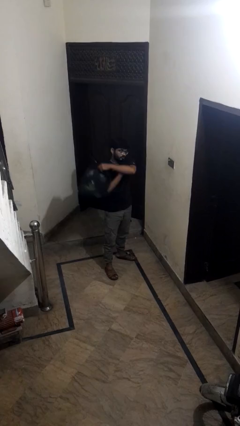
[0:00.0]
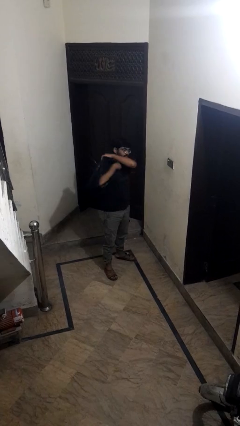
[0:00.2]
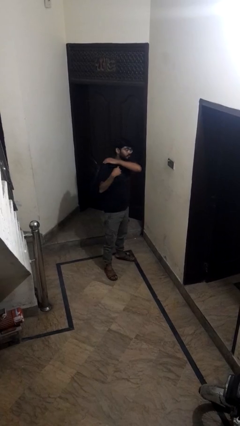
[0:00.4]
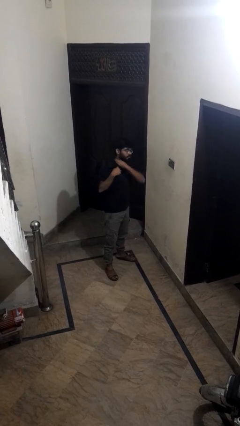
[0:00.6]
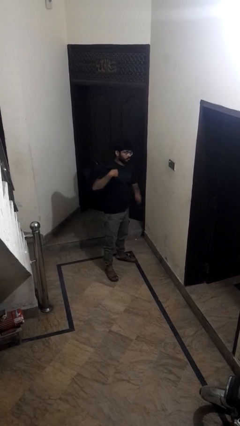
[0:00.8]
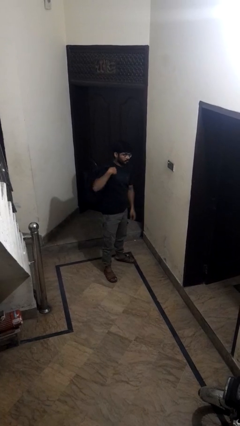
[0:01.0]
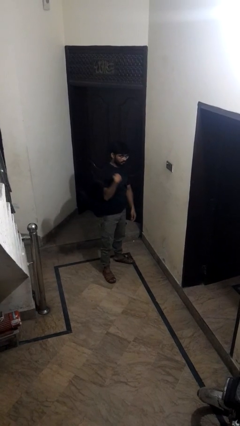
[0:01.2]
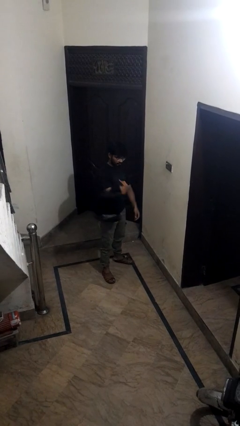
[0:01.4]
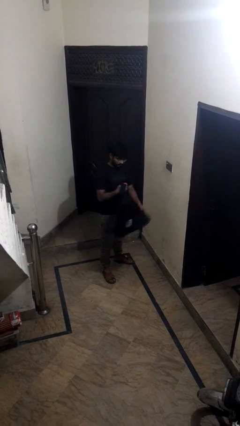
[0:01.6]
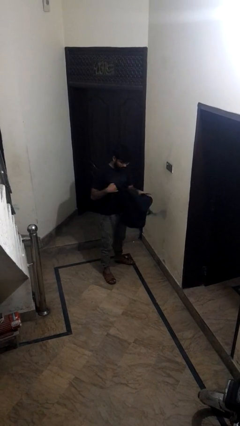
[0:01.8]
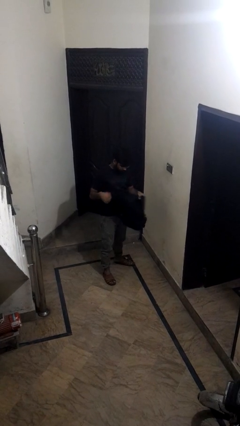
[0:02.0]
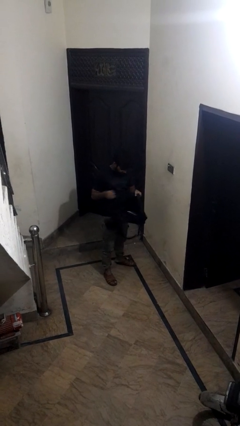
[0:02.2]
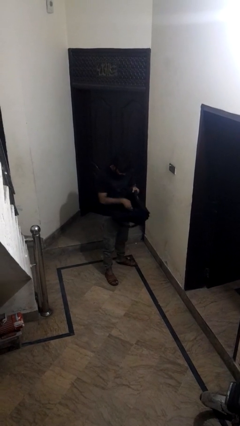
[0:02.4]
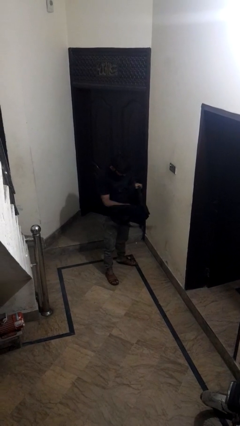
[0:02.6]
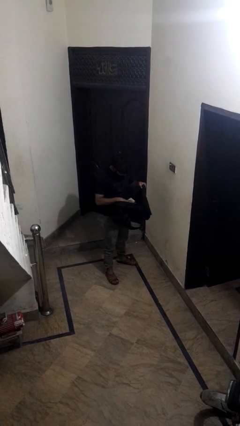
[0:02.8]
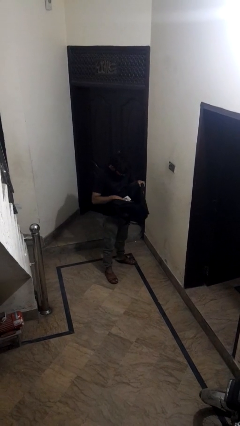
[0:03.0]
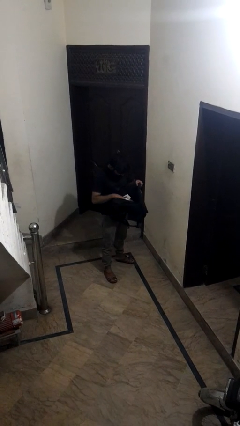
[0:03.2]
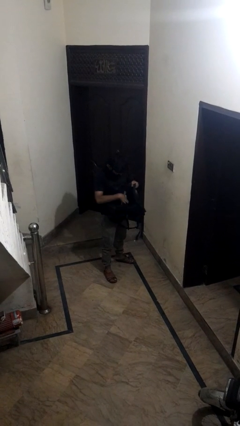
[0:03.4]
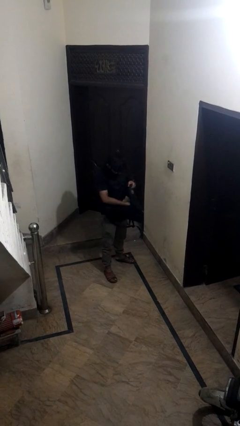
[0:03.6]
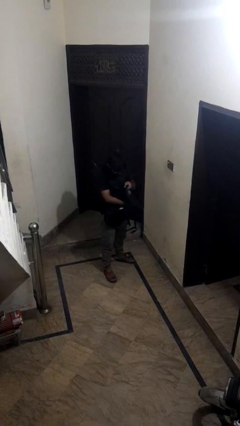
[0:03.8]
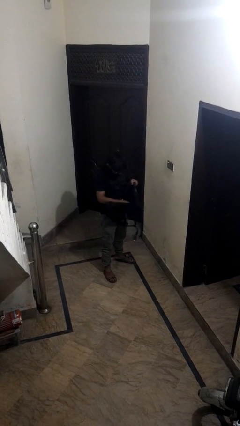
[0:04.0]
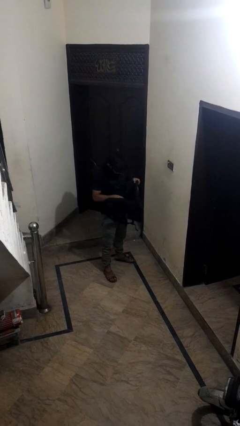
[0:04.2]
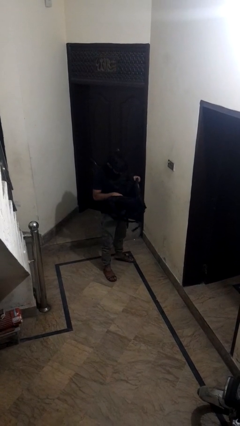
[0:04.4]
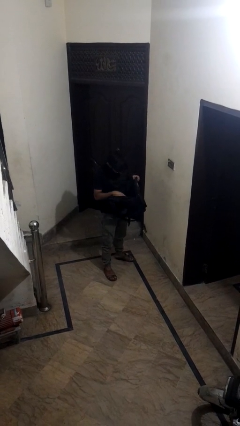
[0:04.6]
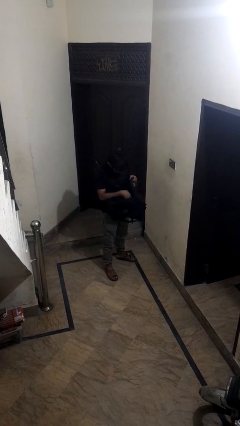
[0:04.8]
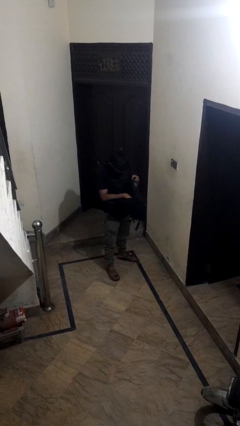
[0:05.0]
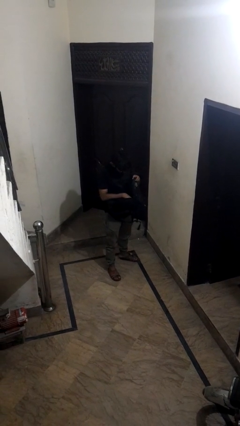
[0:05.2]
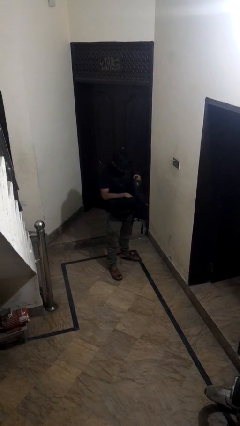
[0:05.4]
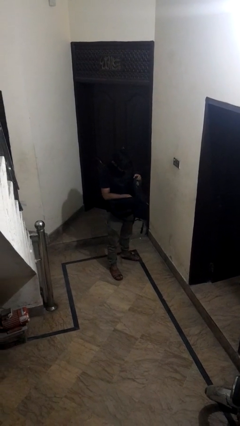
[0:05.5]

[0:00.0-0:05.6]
person searches in backpack

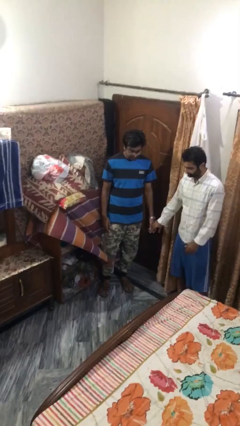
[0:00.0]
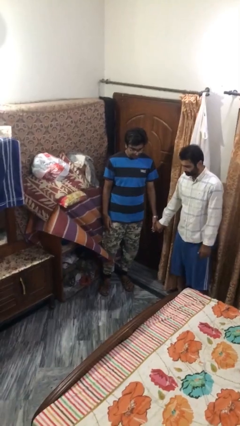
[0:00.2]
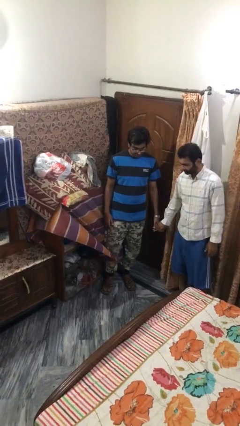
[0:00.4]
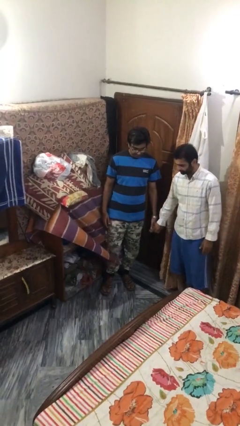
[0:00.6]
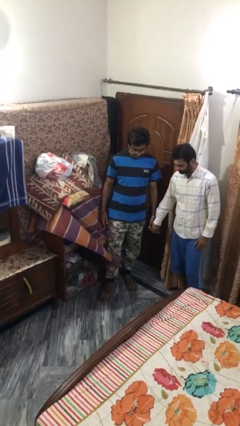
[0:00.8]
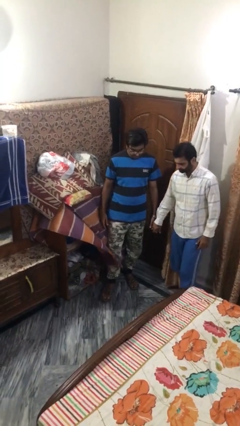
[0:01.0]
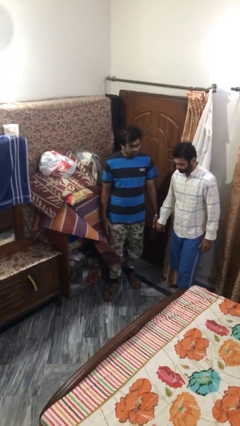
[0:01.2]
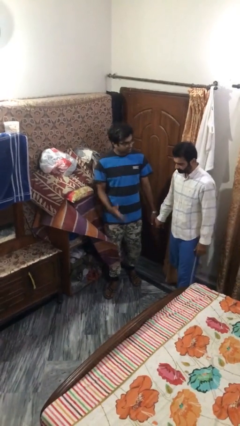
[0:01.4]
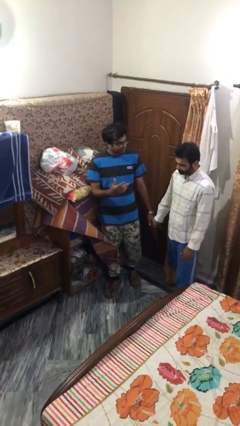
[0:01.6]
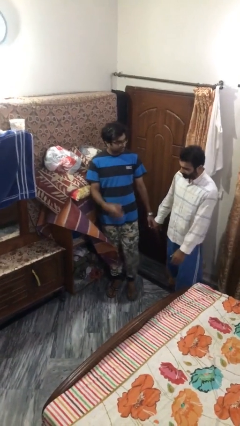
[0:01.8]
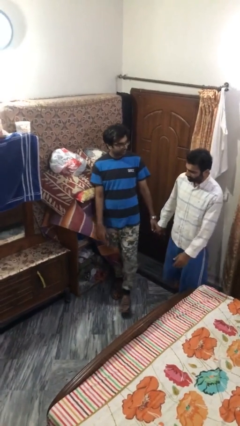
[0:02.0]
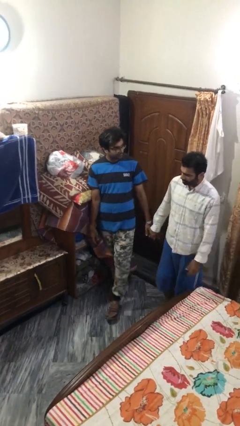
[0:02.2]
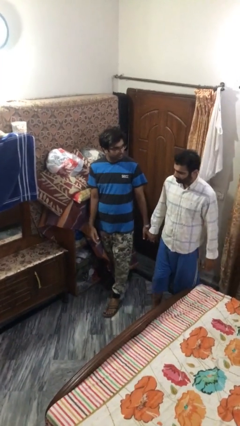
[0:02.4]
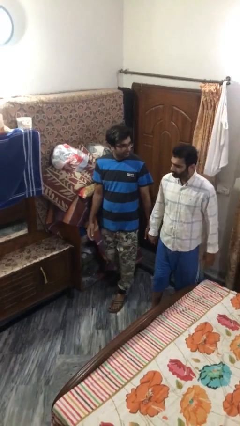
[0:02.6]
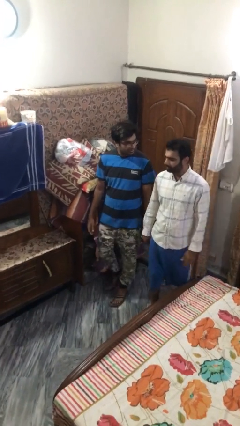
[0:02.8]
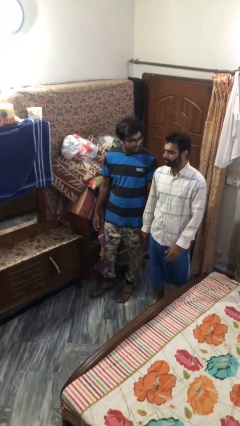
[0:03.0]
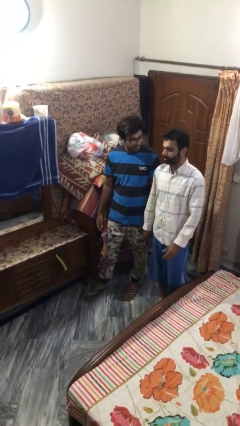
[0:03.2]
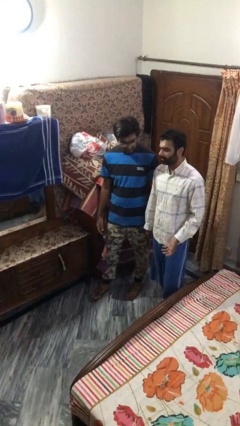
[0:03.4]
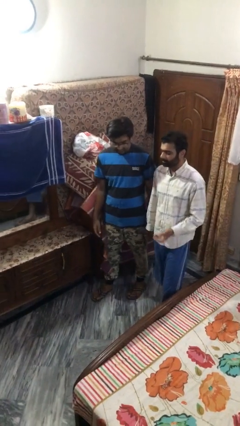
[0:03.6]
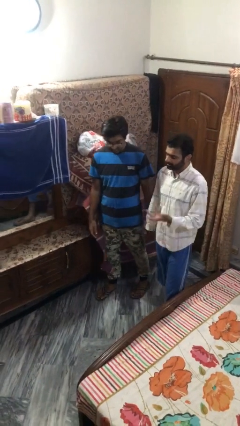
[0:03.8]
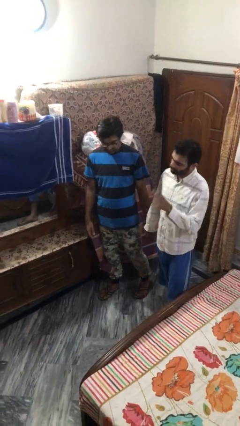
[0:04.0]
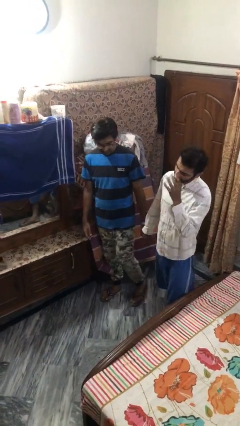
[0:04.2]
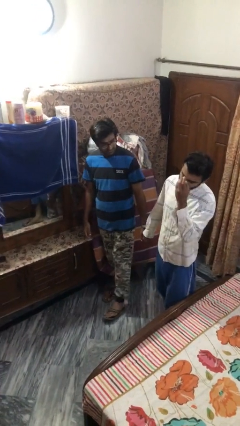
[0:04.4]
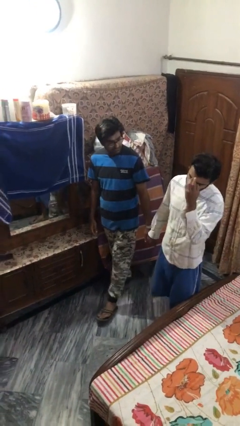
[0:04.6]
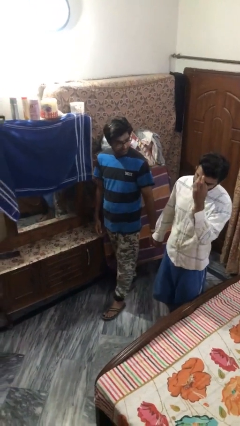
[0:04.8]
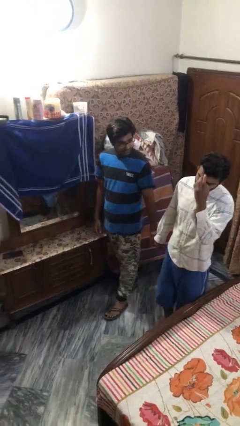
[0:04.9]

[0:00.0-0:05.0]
person holds hand

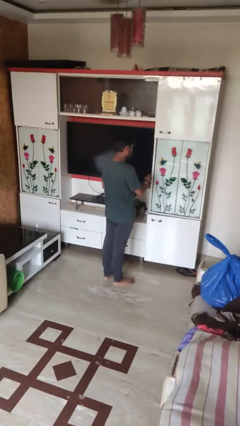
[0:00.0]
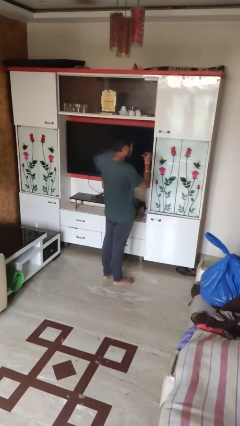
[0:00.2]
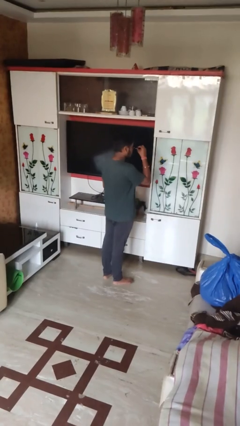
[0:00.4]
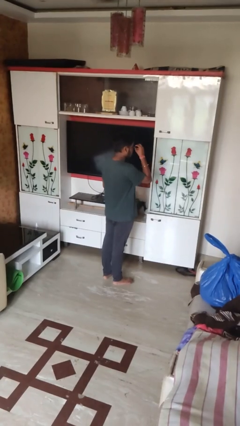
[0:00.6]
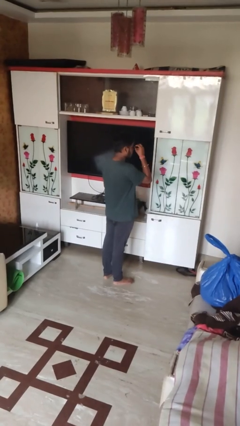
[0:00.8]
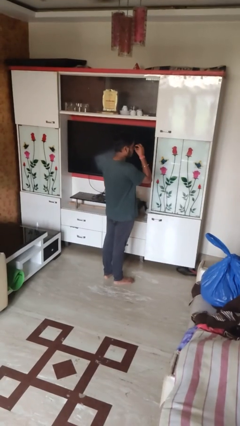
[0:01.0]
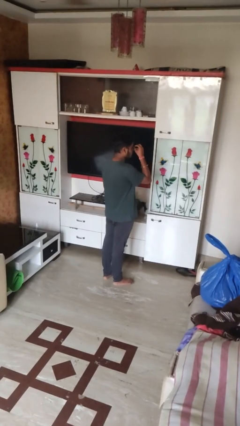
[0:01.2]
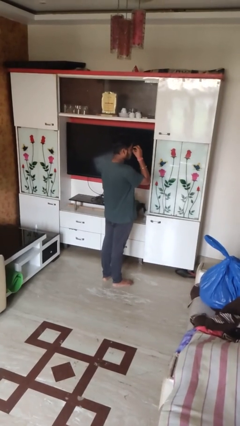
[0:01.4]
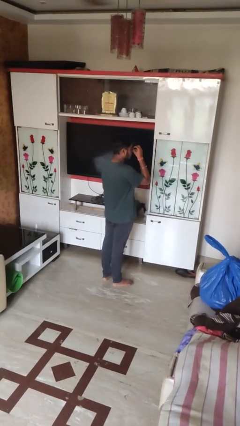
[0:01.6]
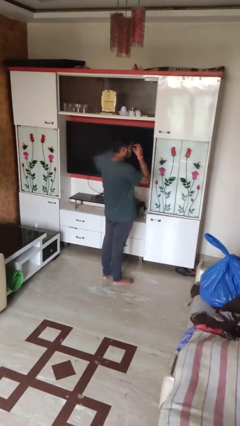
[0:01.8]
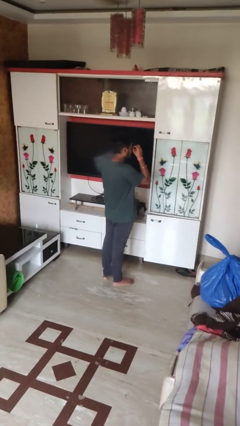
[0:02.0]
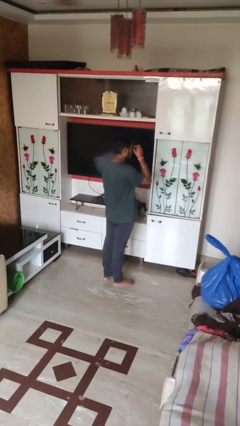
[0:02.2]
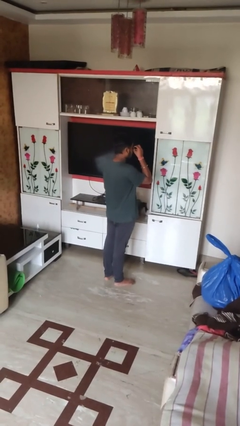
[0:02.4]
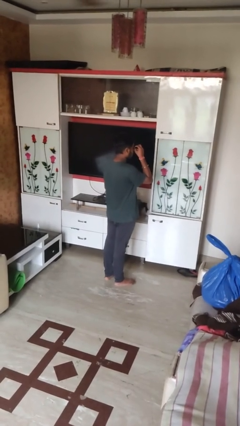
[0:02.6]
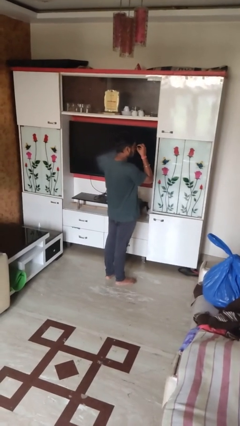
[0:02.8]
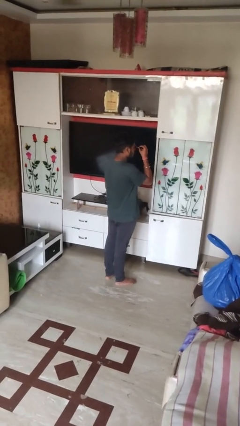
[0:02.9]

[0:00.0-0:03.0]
person applies eye makeup

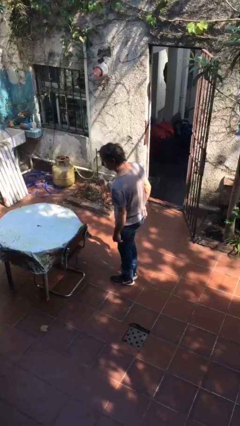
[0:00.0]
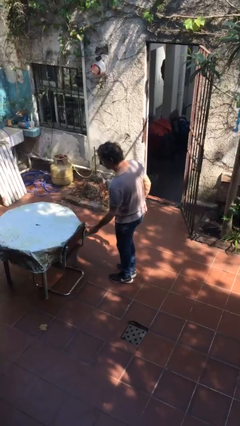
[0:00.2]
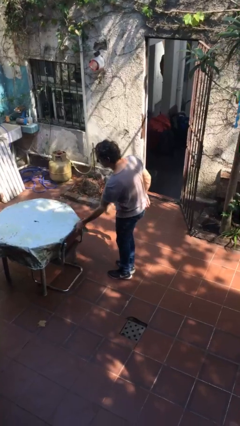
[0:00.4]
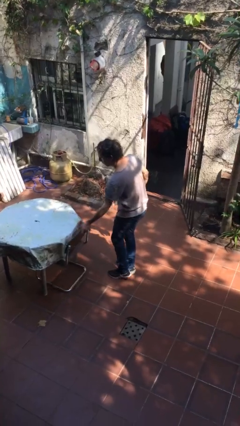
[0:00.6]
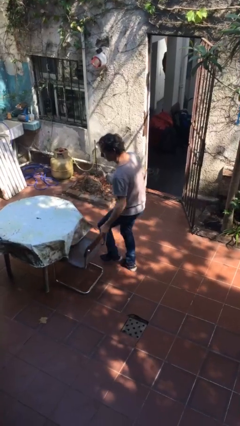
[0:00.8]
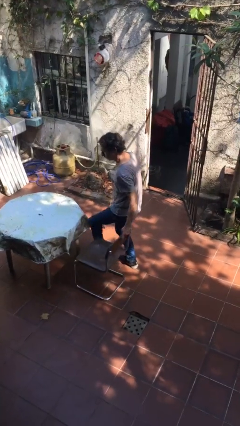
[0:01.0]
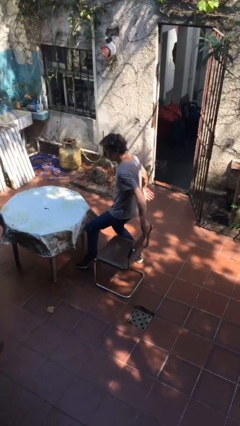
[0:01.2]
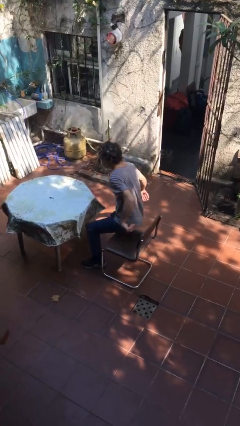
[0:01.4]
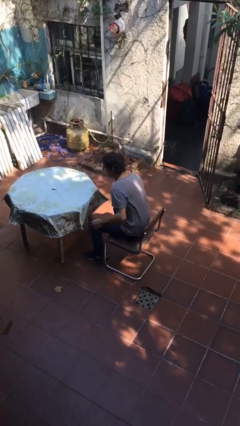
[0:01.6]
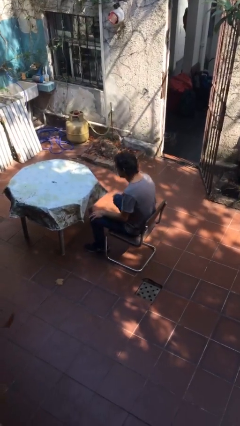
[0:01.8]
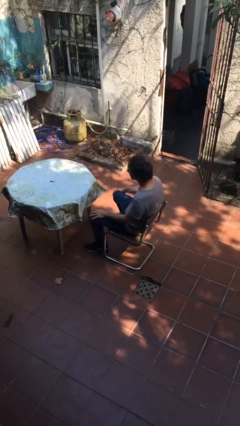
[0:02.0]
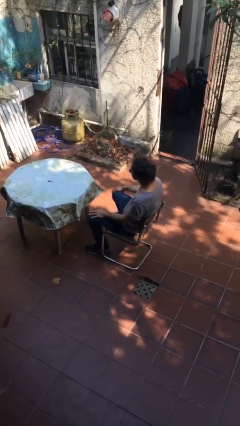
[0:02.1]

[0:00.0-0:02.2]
person sits down

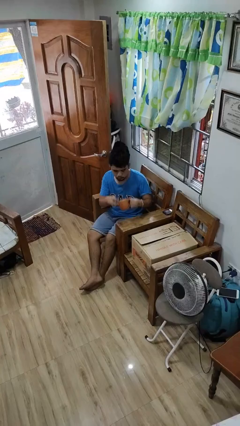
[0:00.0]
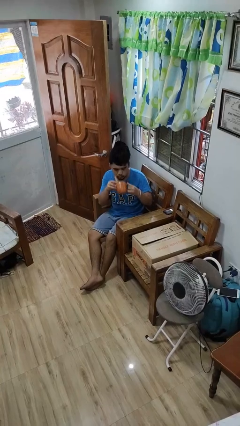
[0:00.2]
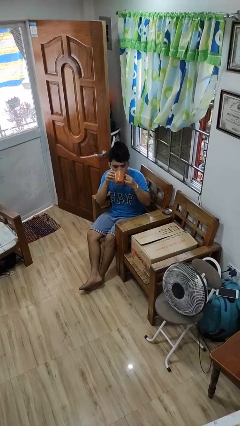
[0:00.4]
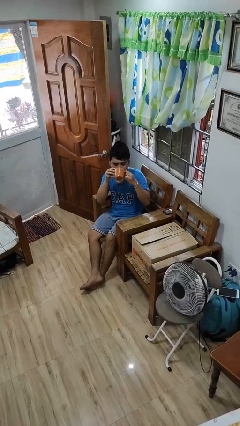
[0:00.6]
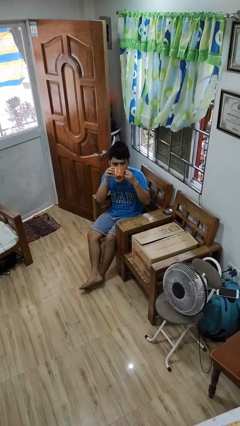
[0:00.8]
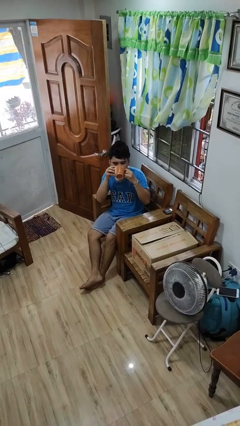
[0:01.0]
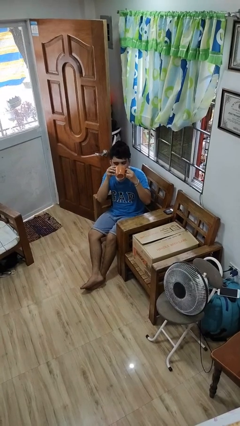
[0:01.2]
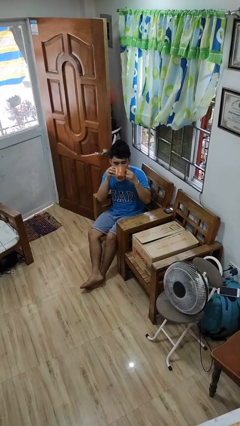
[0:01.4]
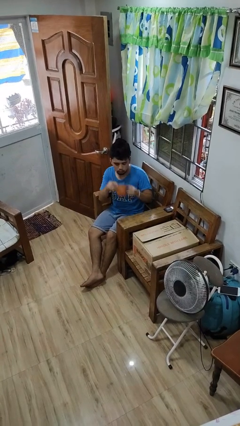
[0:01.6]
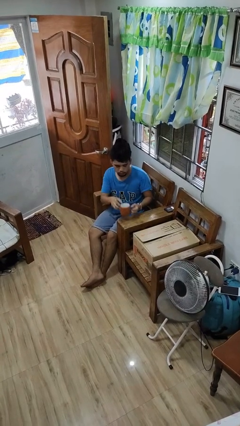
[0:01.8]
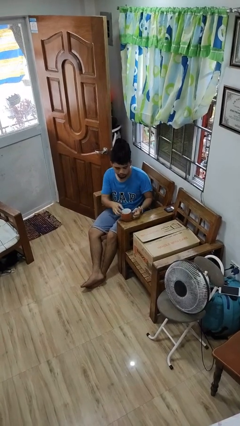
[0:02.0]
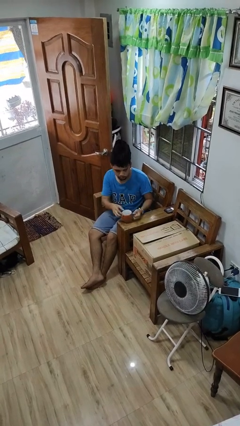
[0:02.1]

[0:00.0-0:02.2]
person drinks from mug
